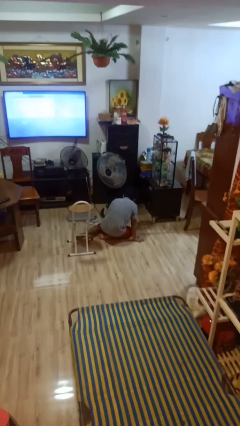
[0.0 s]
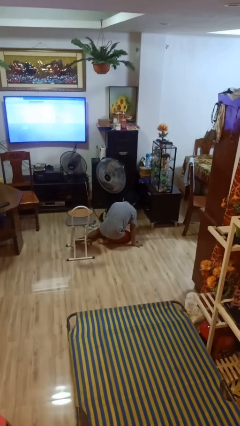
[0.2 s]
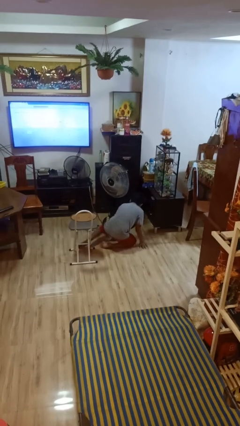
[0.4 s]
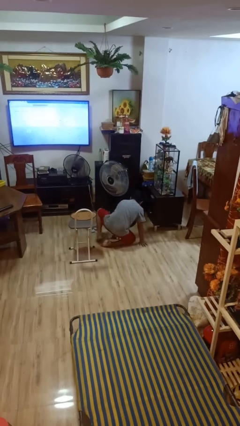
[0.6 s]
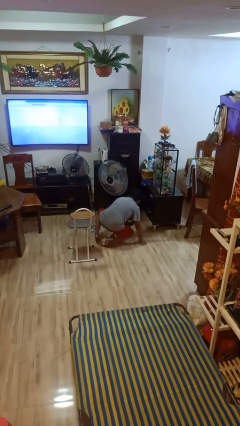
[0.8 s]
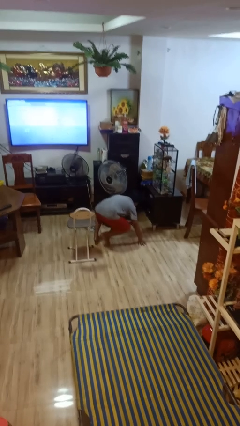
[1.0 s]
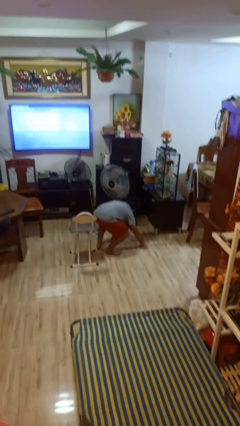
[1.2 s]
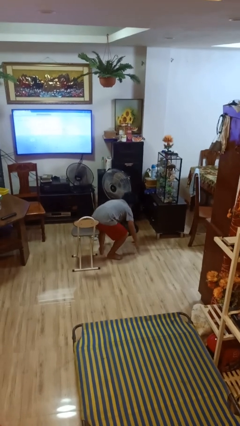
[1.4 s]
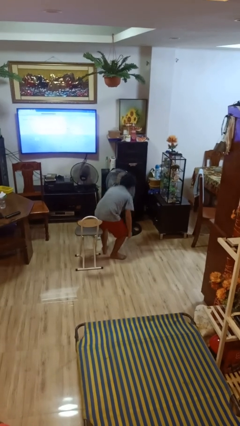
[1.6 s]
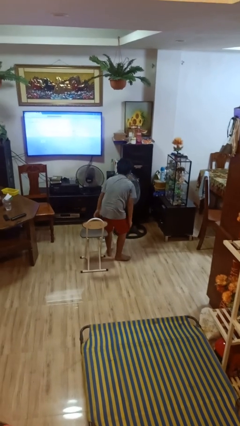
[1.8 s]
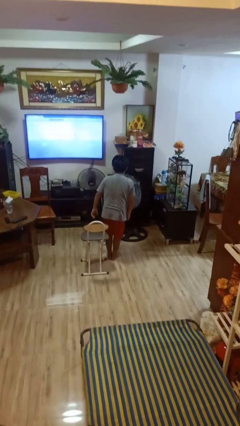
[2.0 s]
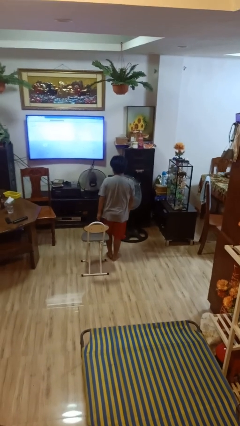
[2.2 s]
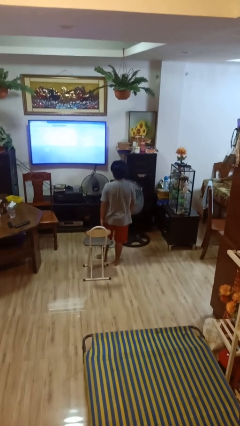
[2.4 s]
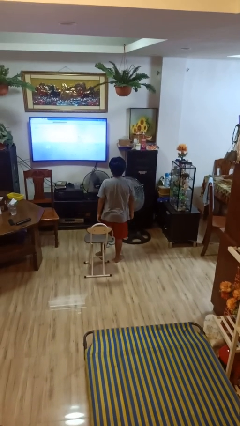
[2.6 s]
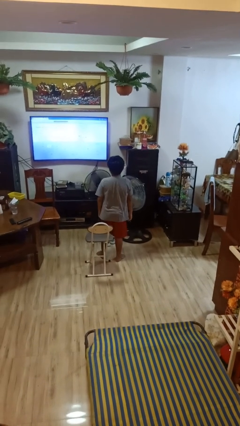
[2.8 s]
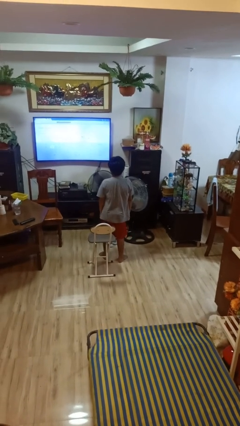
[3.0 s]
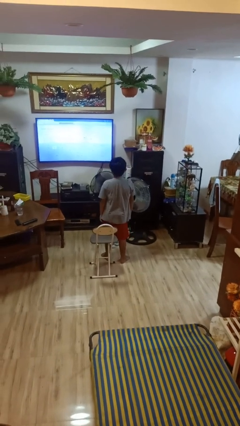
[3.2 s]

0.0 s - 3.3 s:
person stands up from floor

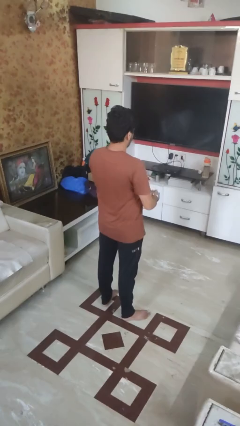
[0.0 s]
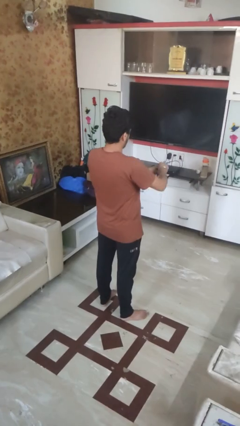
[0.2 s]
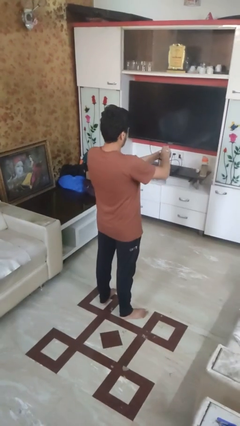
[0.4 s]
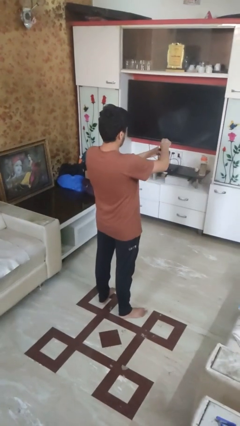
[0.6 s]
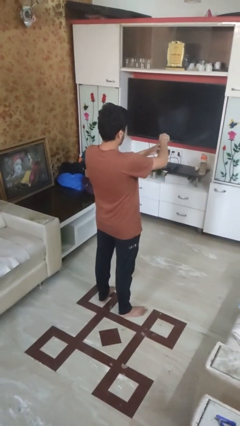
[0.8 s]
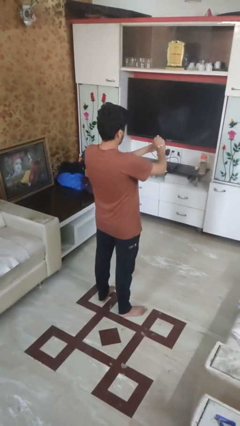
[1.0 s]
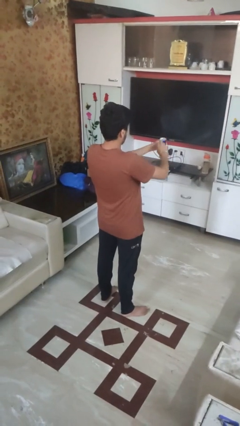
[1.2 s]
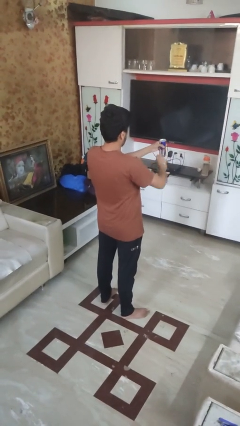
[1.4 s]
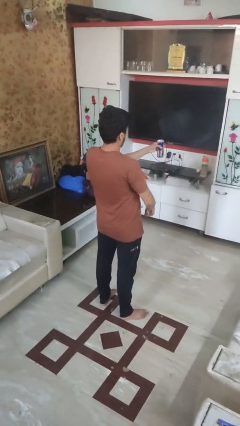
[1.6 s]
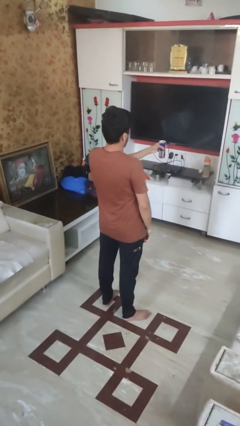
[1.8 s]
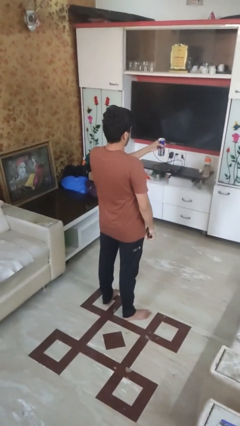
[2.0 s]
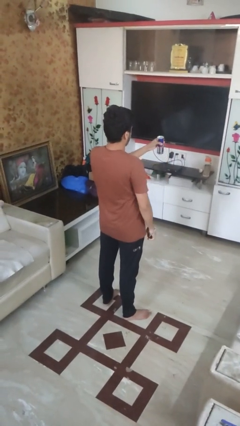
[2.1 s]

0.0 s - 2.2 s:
person opens beverage can

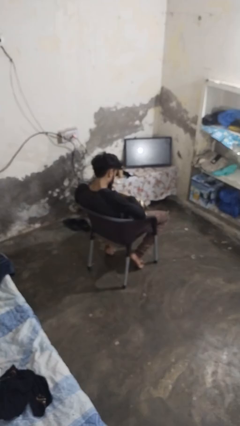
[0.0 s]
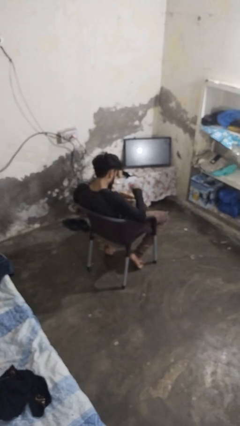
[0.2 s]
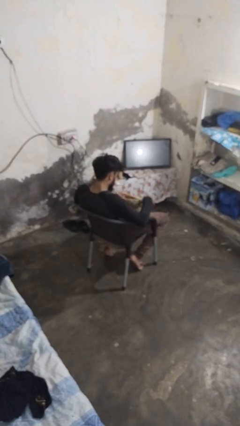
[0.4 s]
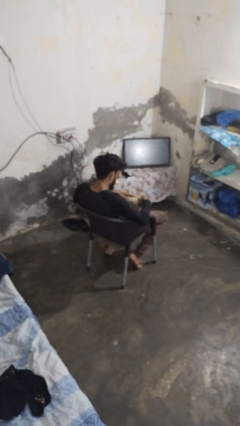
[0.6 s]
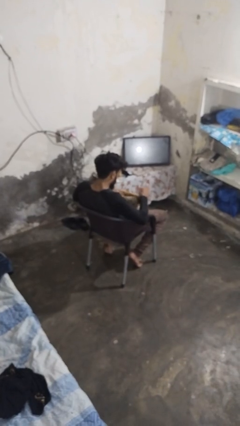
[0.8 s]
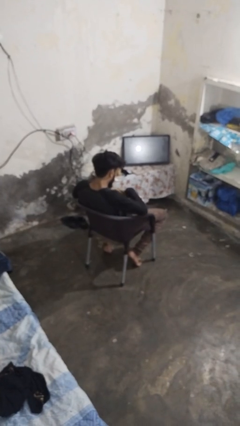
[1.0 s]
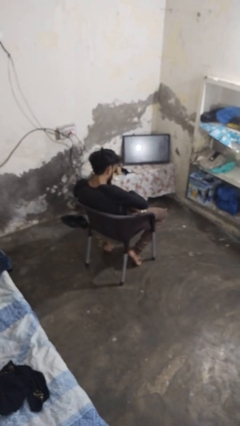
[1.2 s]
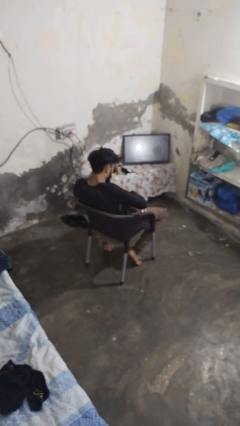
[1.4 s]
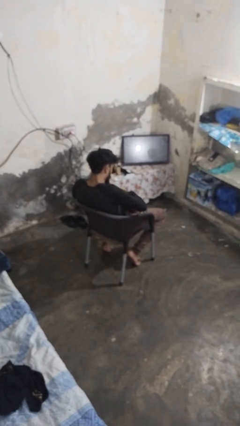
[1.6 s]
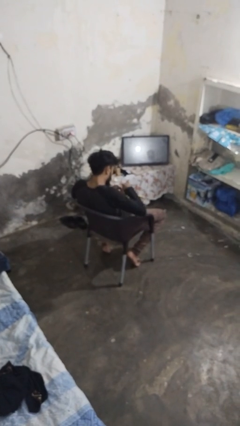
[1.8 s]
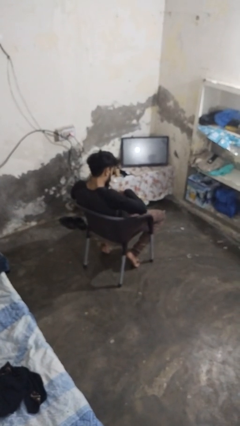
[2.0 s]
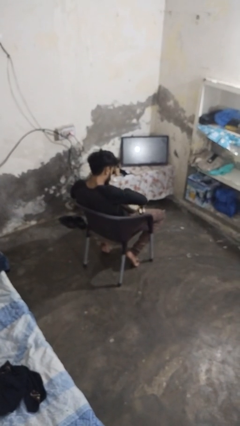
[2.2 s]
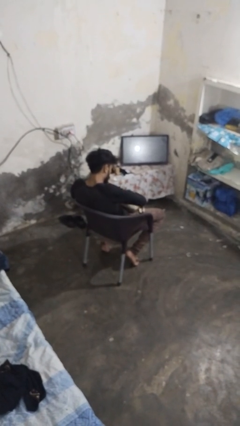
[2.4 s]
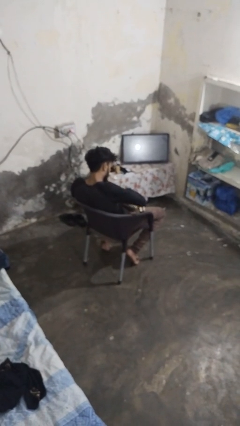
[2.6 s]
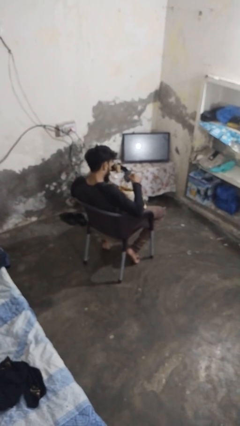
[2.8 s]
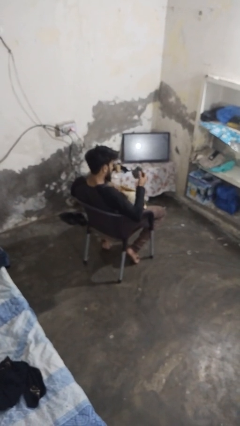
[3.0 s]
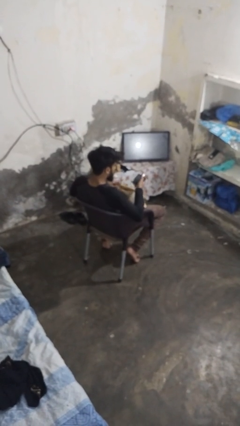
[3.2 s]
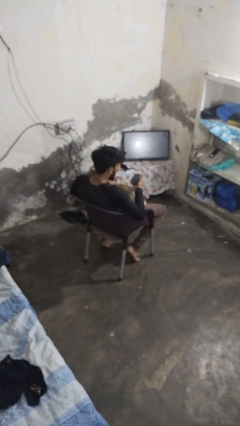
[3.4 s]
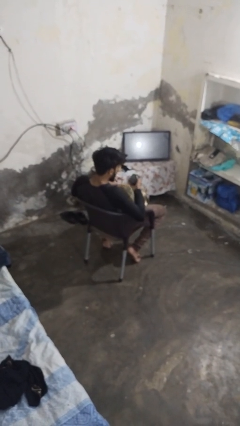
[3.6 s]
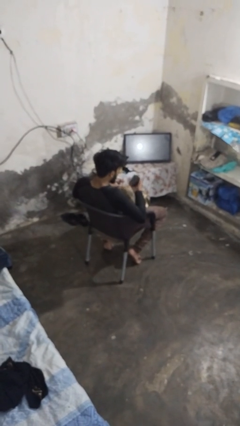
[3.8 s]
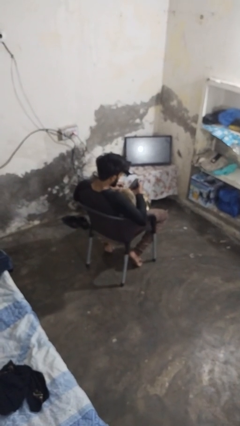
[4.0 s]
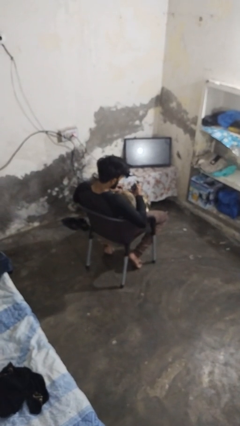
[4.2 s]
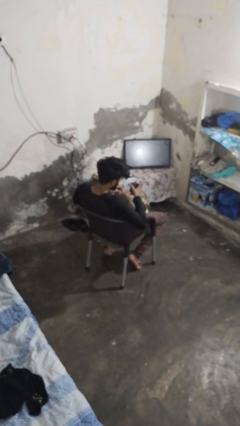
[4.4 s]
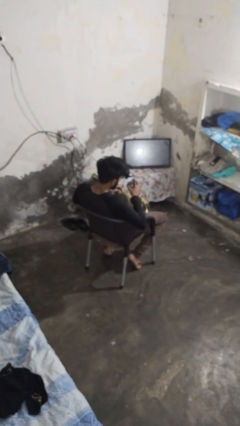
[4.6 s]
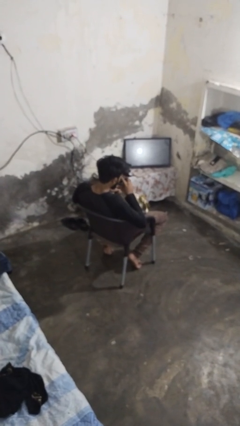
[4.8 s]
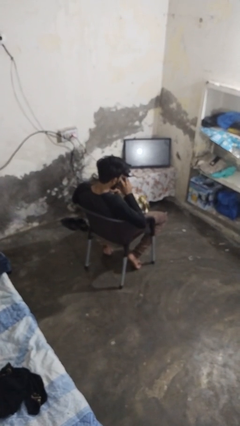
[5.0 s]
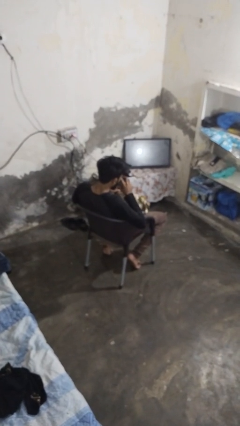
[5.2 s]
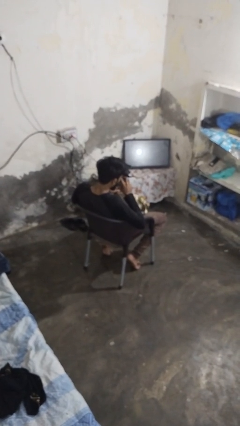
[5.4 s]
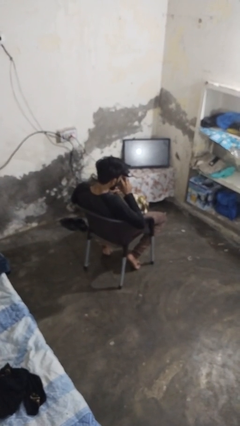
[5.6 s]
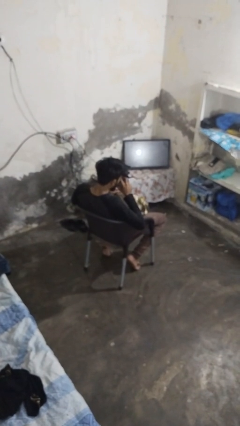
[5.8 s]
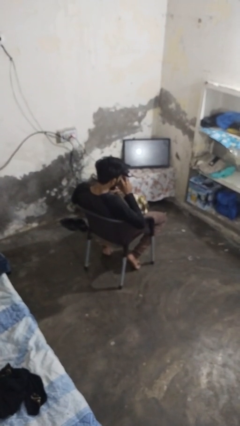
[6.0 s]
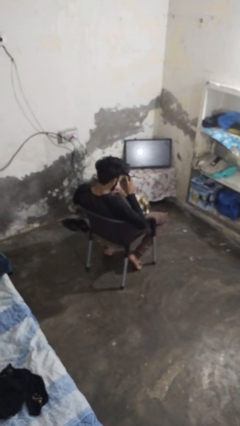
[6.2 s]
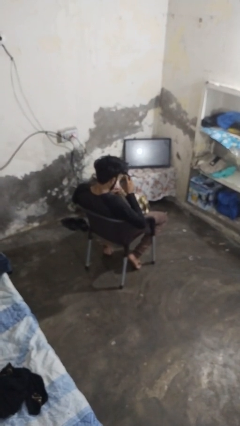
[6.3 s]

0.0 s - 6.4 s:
person takes object from purse

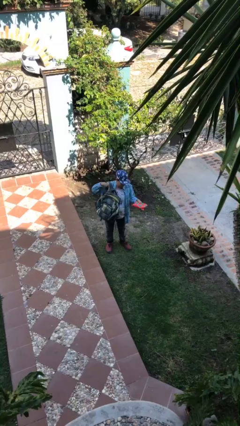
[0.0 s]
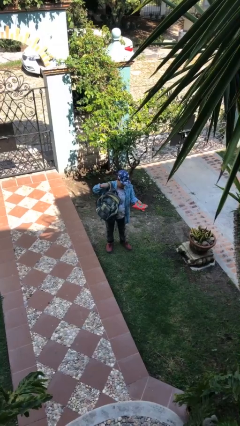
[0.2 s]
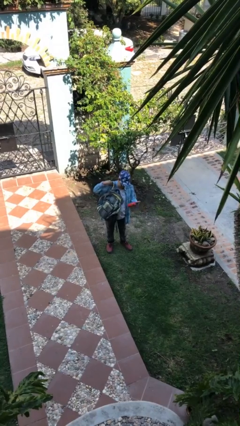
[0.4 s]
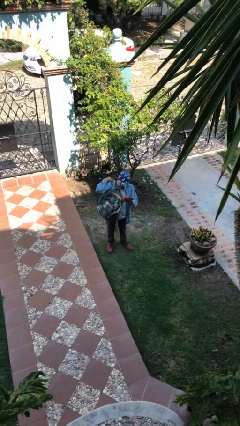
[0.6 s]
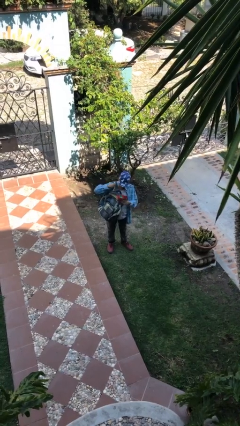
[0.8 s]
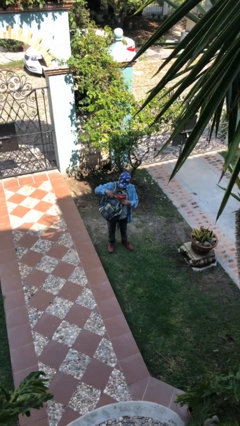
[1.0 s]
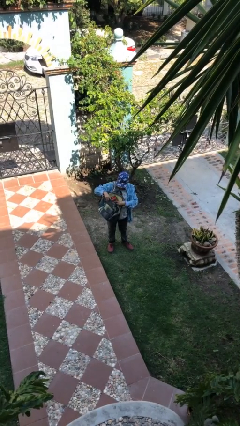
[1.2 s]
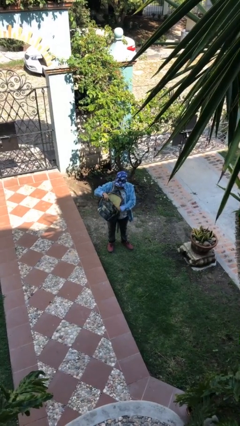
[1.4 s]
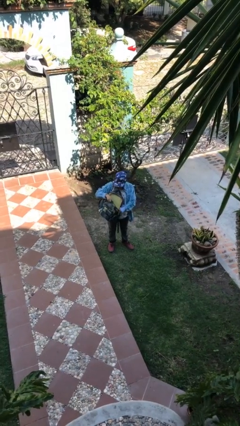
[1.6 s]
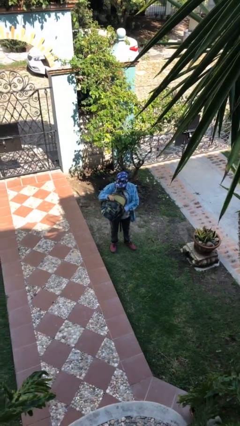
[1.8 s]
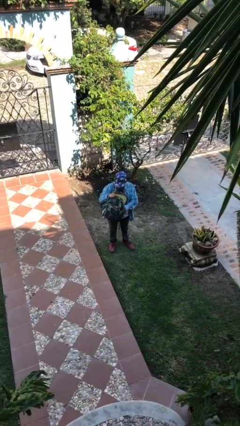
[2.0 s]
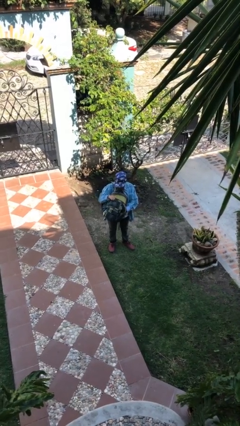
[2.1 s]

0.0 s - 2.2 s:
person puts object into backpack

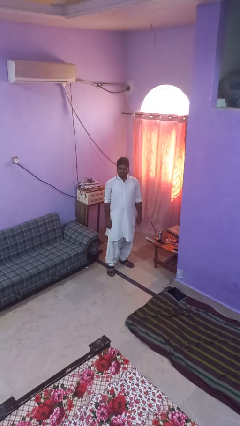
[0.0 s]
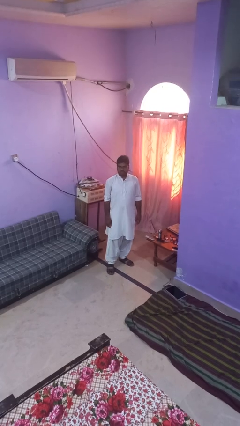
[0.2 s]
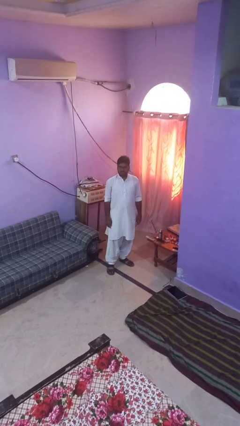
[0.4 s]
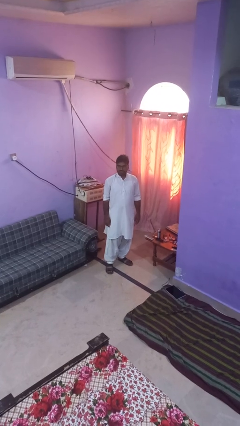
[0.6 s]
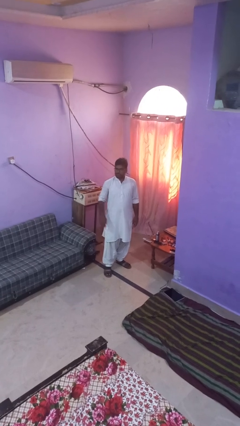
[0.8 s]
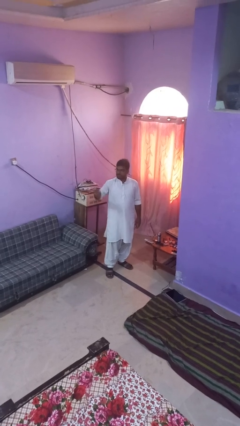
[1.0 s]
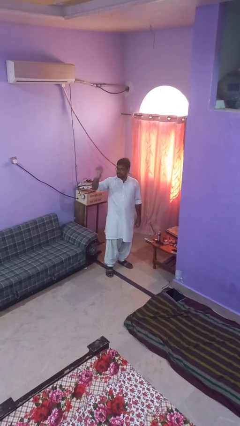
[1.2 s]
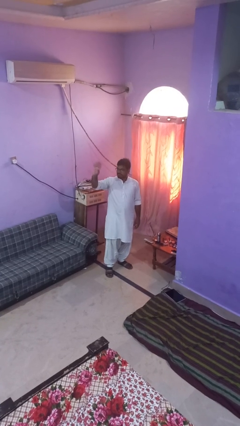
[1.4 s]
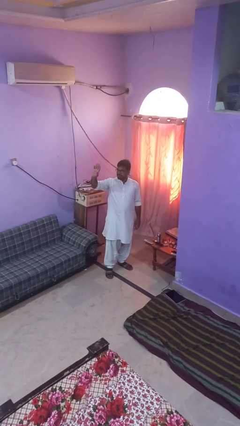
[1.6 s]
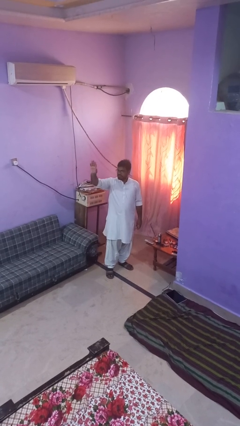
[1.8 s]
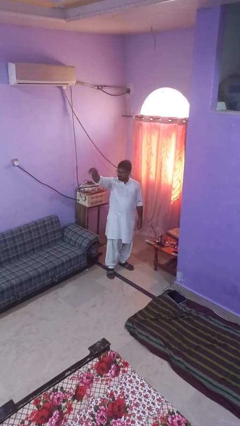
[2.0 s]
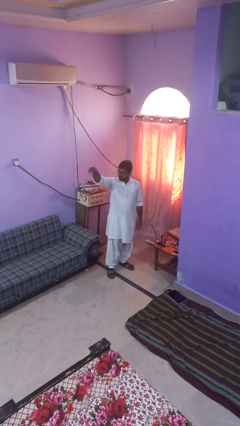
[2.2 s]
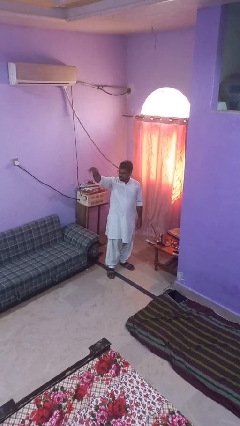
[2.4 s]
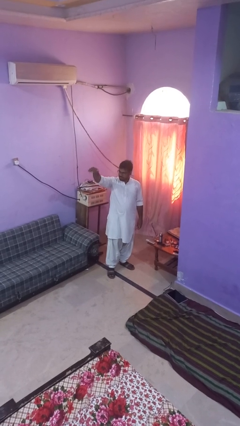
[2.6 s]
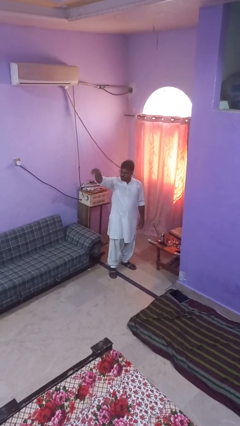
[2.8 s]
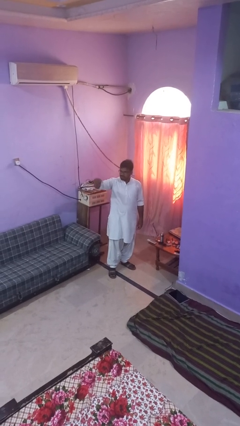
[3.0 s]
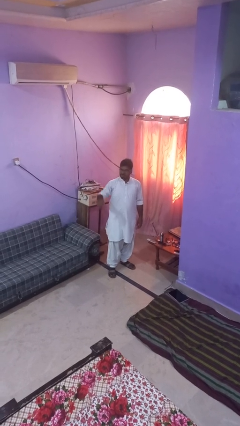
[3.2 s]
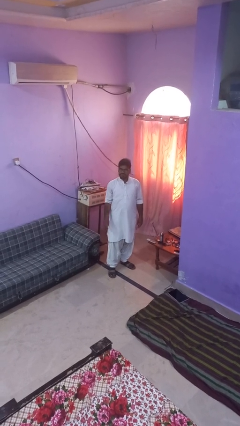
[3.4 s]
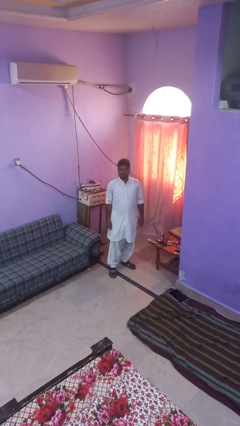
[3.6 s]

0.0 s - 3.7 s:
person gestures come here
